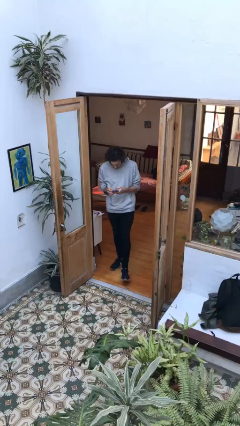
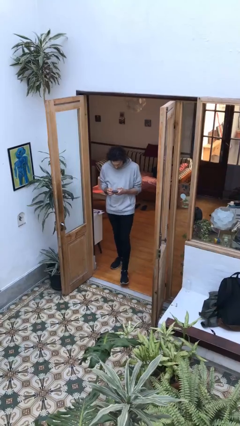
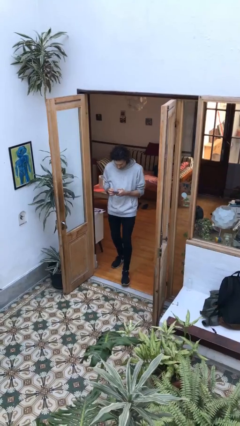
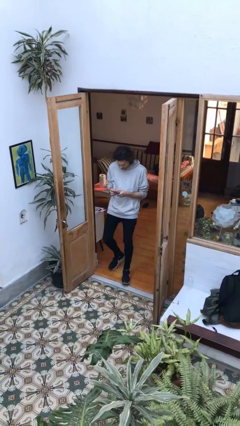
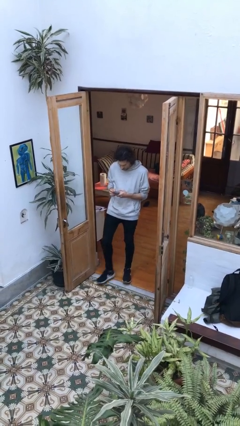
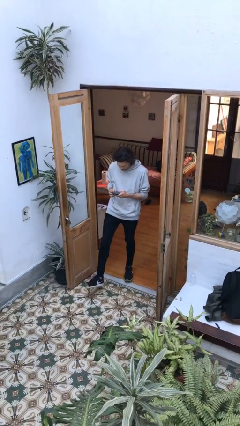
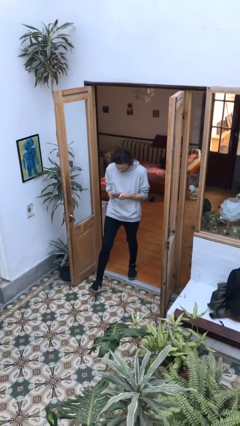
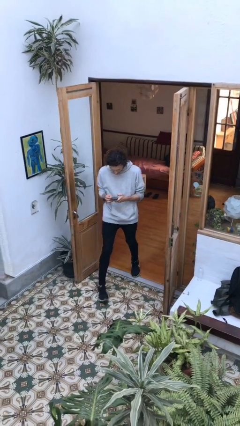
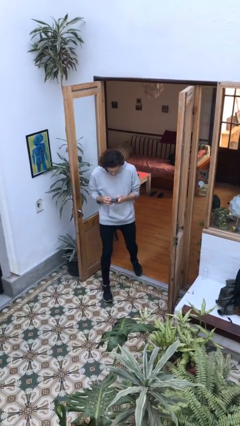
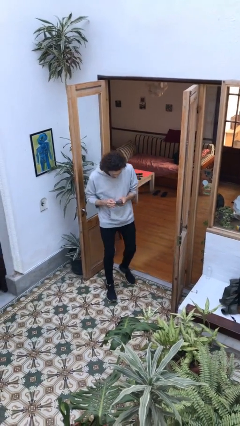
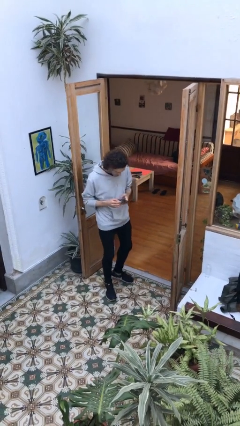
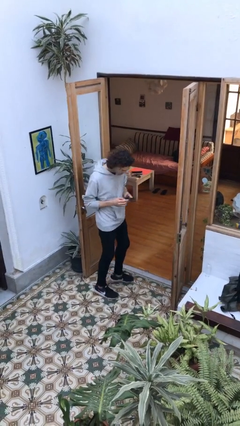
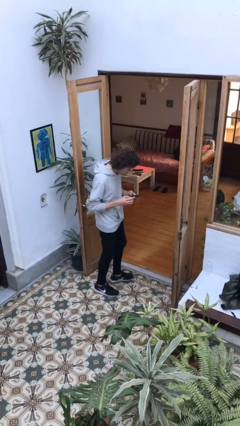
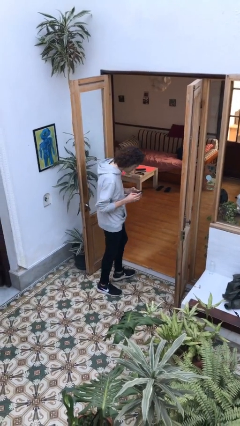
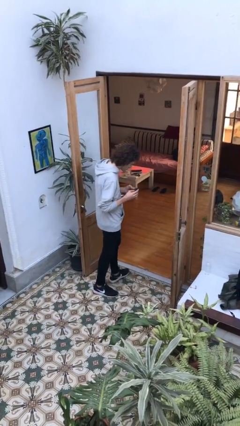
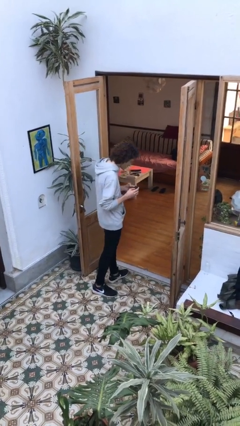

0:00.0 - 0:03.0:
person enters scene through structure

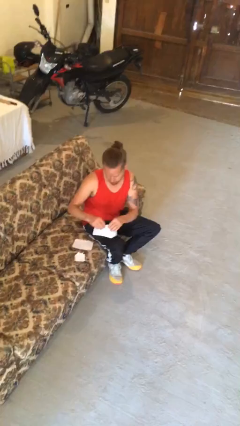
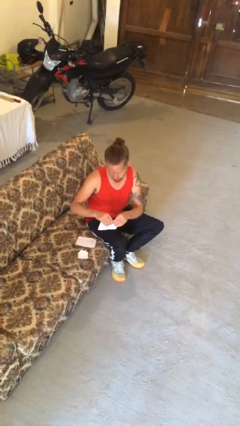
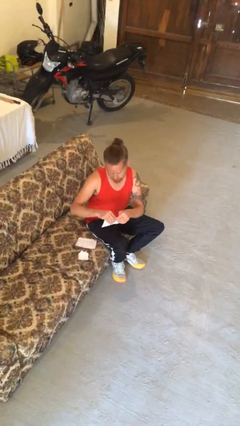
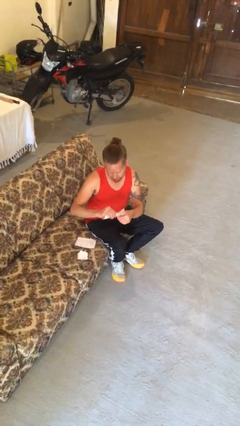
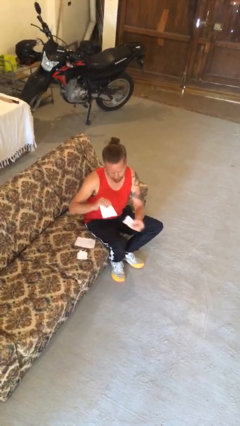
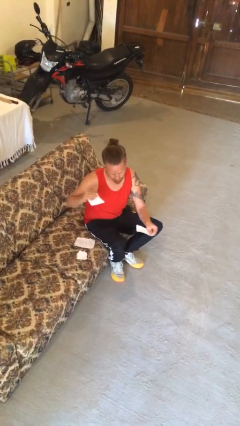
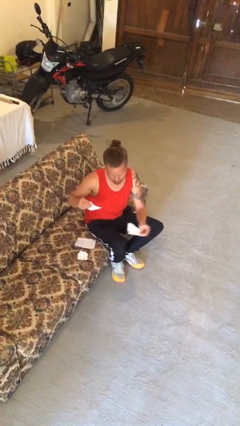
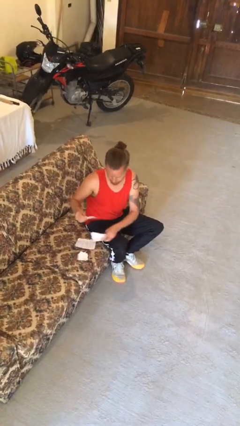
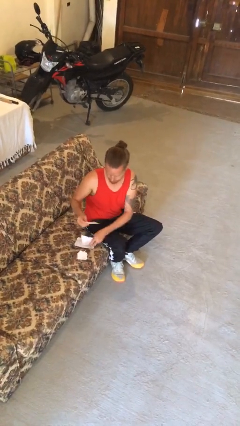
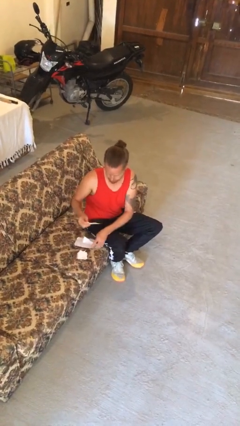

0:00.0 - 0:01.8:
person tears paper

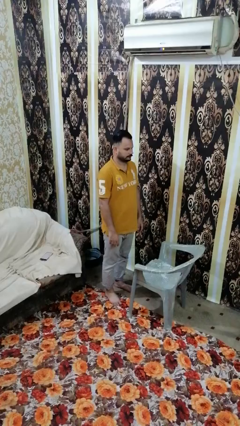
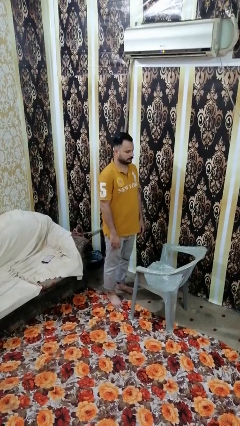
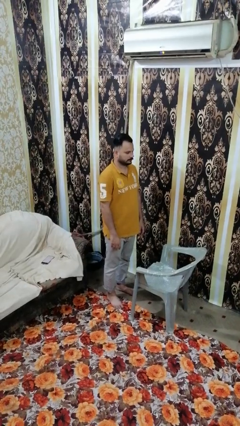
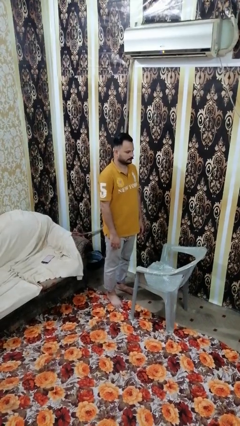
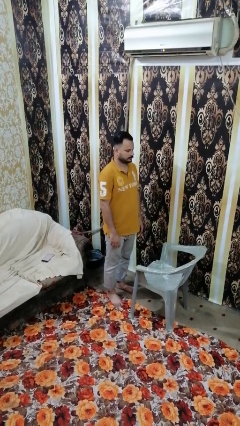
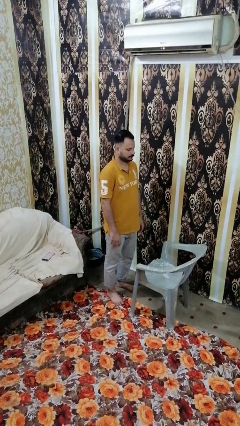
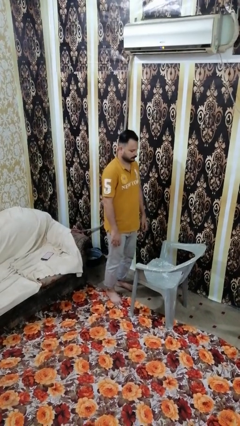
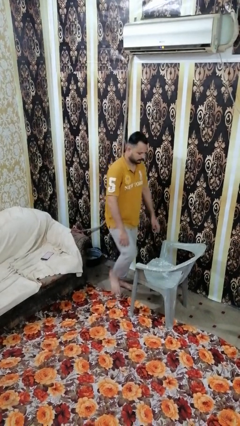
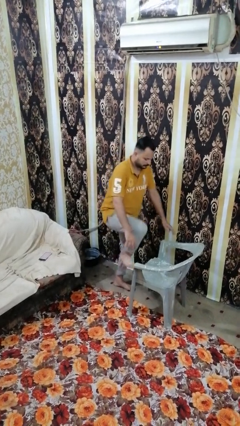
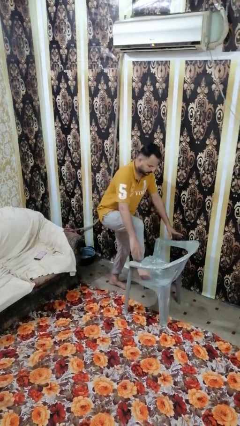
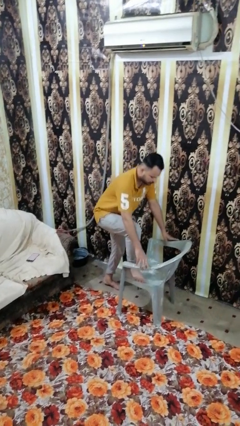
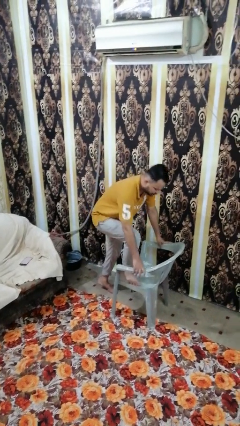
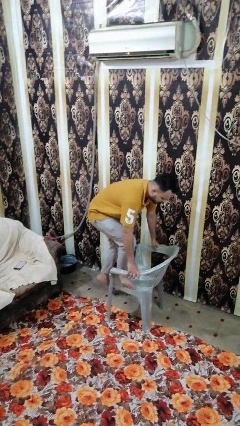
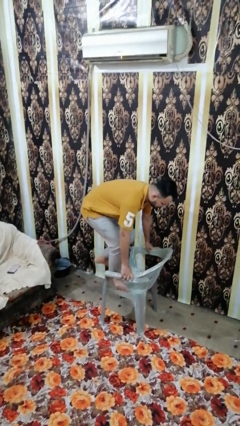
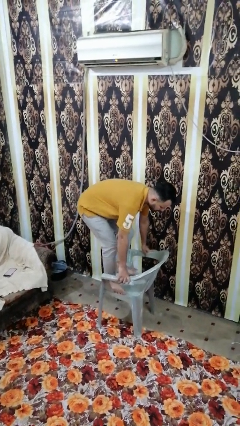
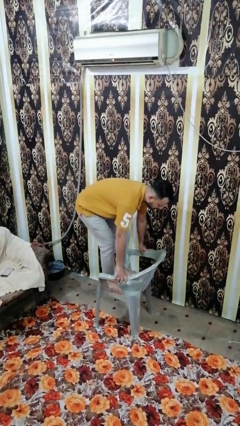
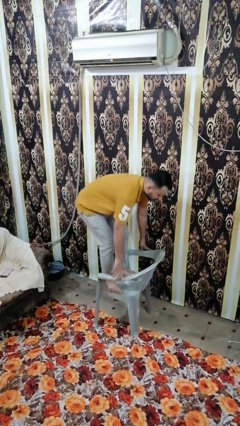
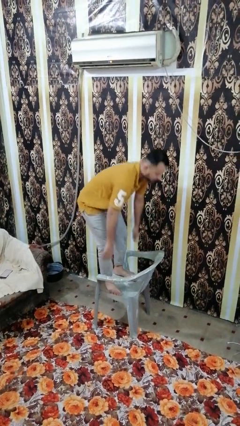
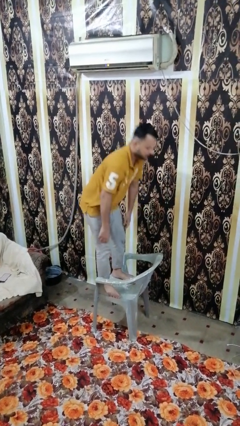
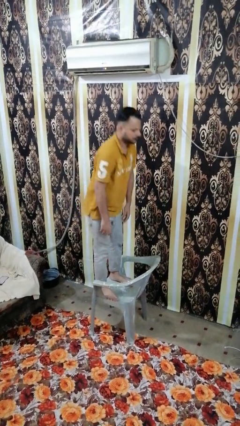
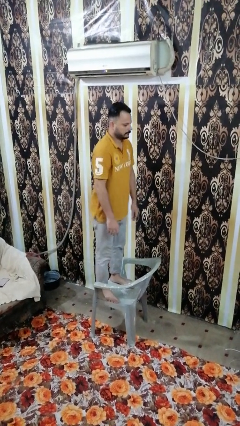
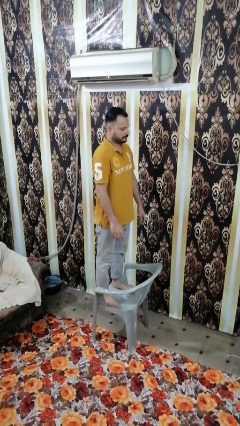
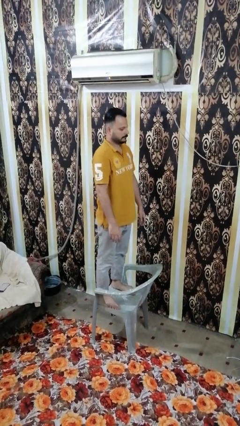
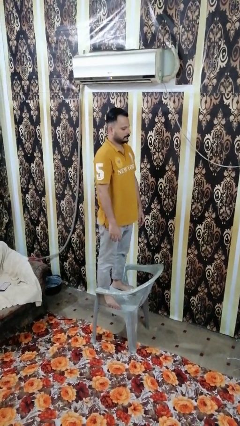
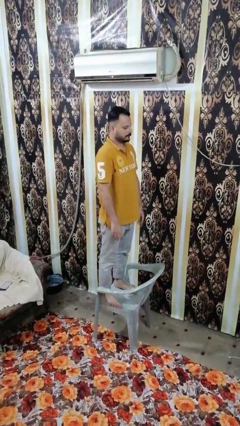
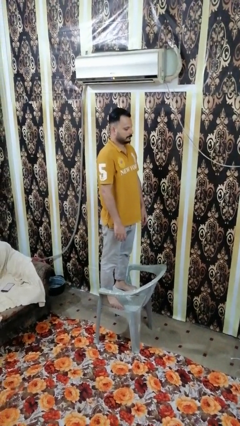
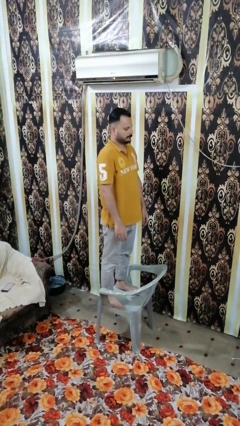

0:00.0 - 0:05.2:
person climbs on chair

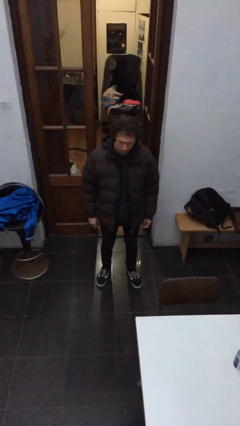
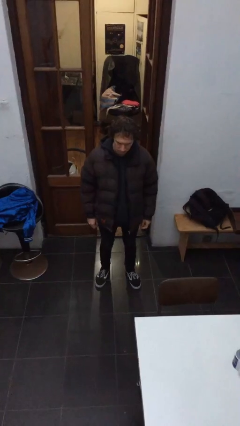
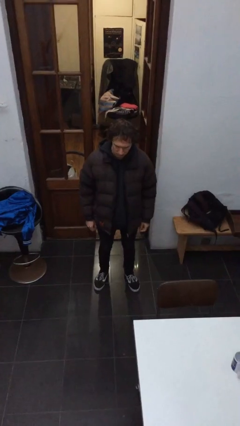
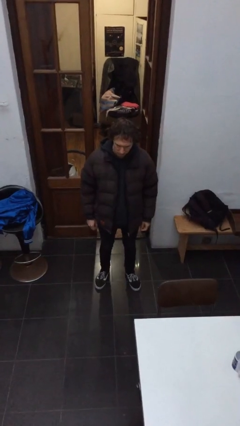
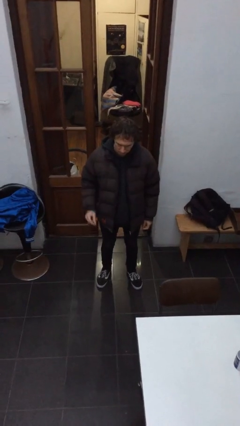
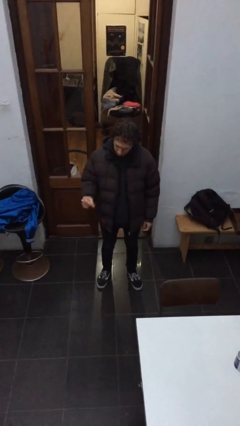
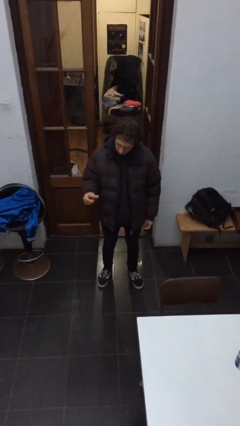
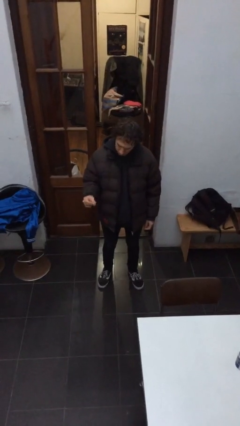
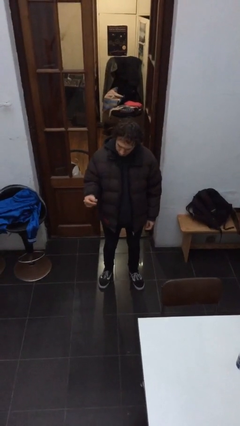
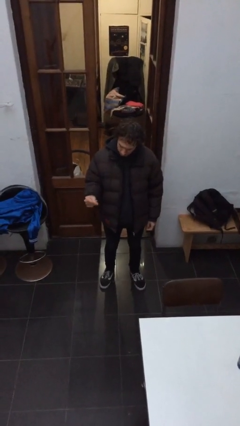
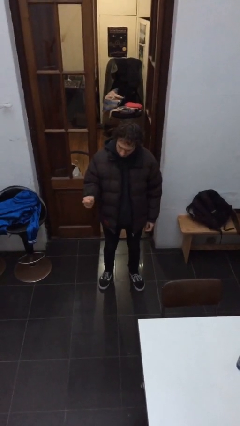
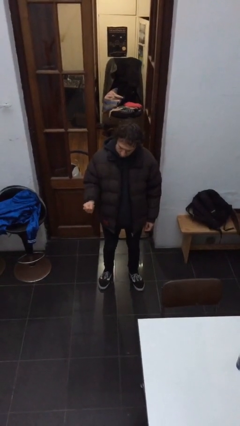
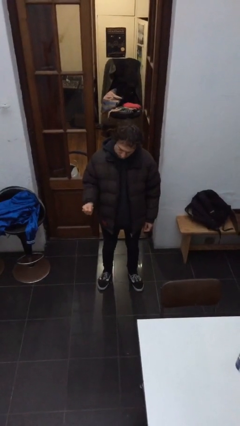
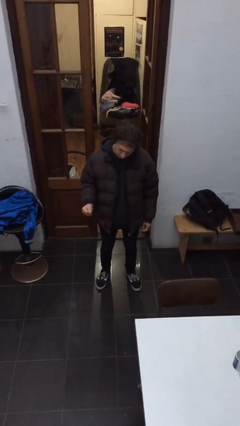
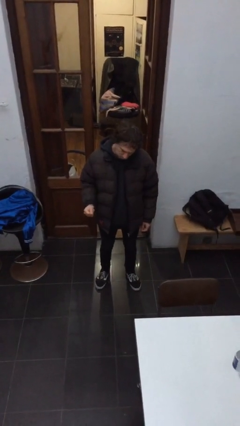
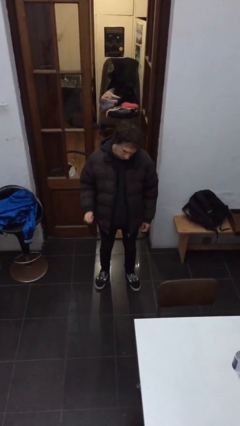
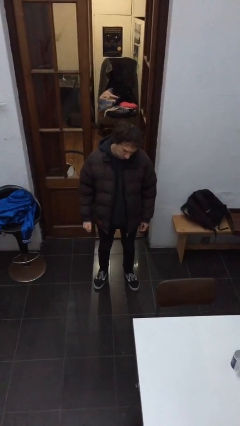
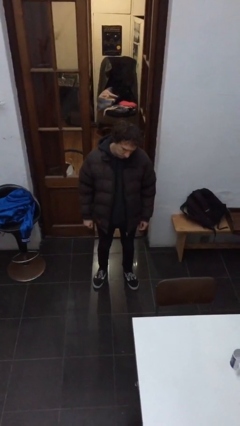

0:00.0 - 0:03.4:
person snaps fingers

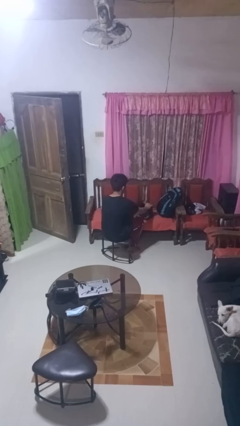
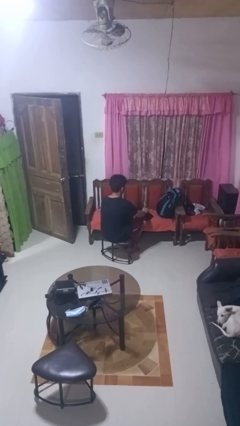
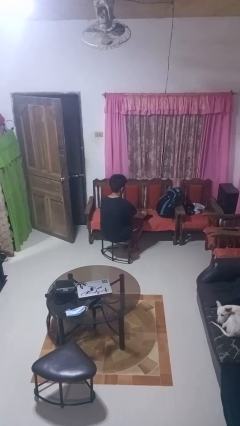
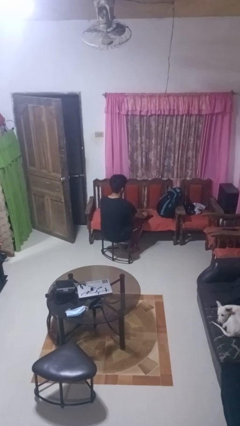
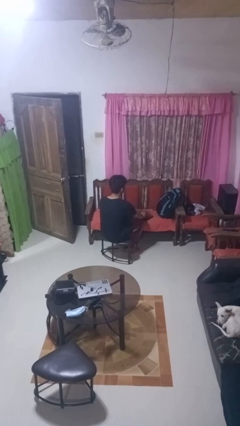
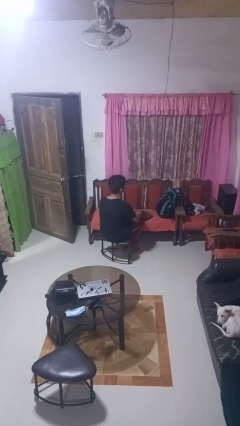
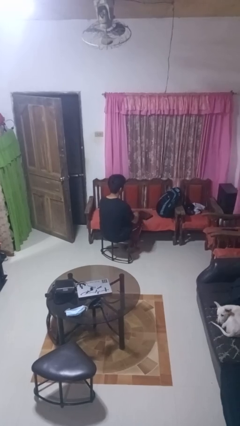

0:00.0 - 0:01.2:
person closes laptop

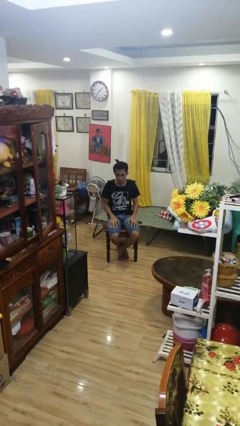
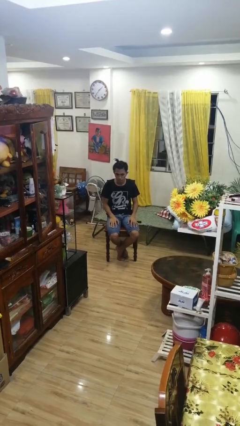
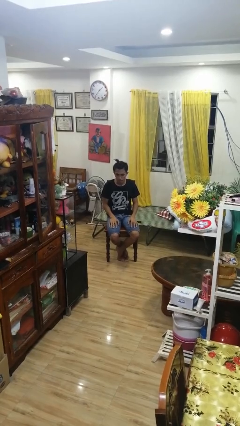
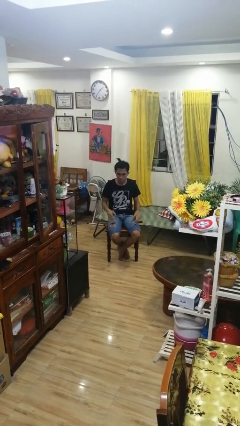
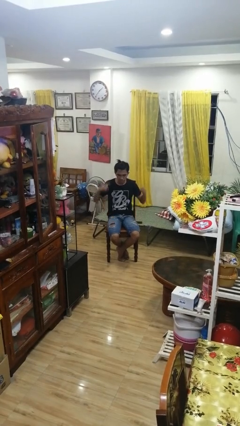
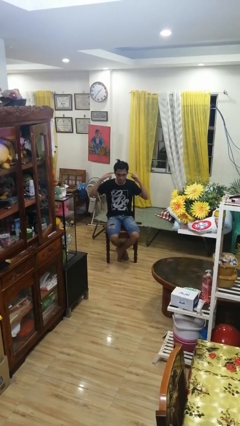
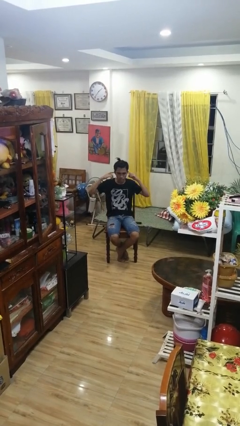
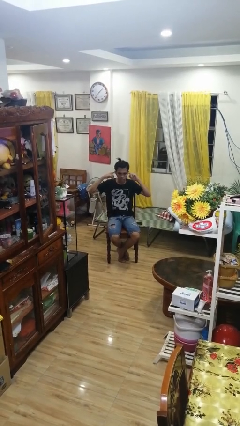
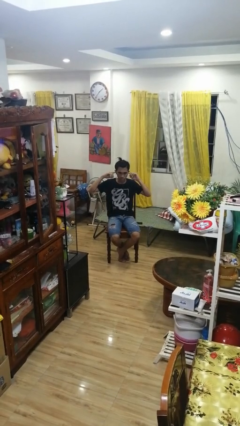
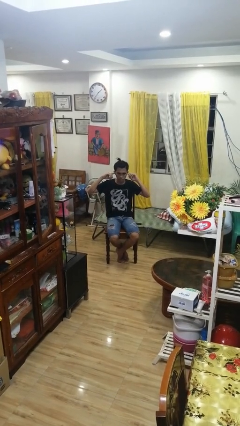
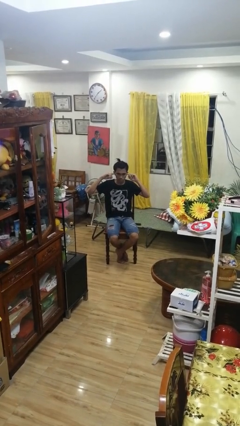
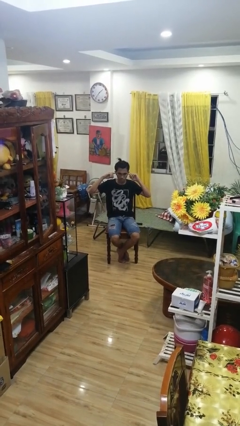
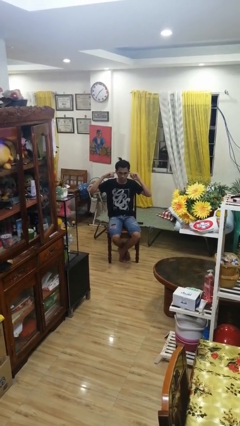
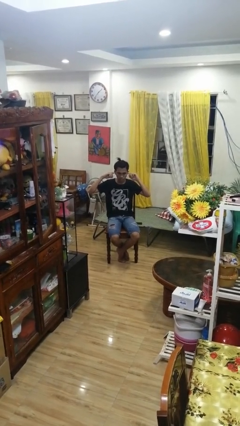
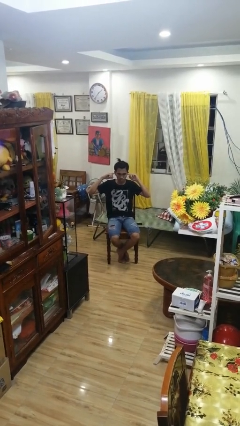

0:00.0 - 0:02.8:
person puts fingers in ear
